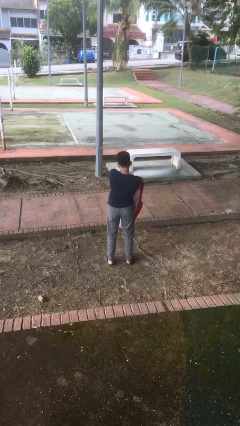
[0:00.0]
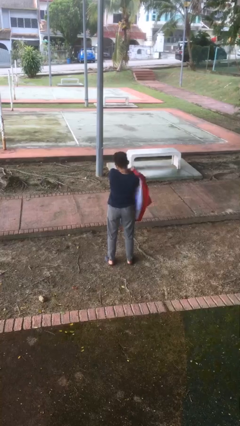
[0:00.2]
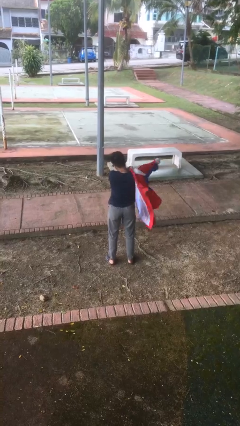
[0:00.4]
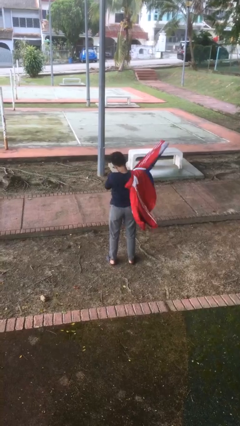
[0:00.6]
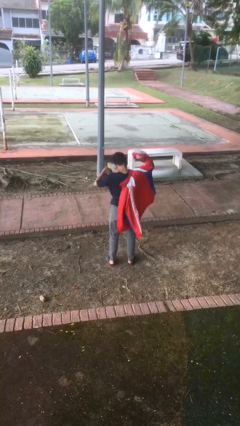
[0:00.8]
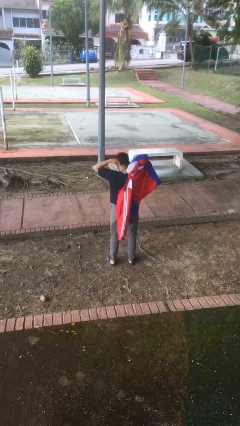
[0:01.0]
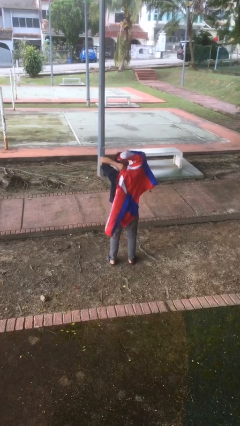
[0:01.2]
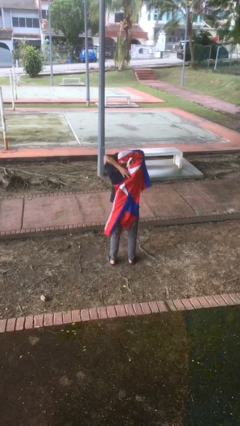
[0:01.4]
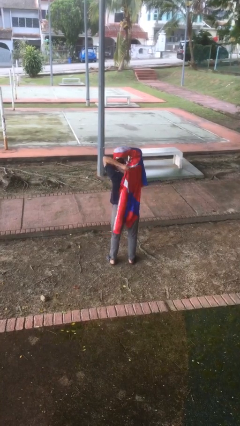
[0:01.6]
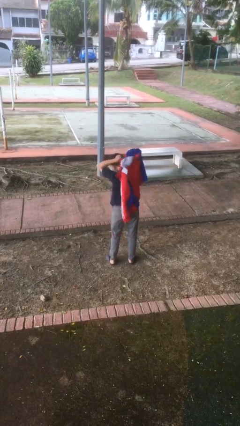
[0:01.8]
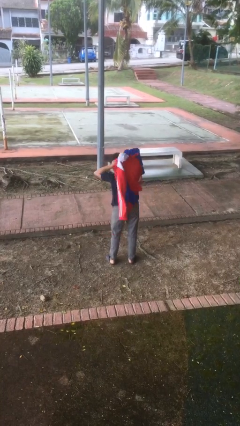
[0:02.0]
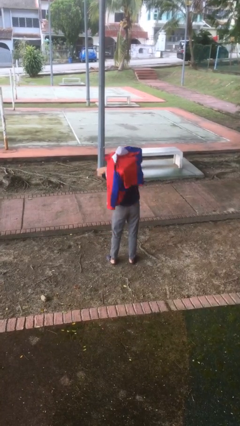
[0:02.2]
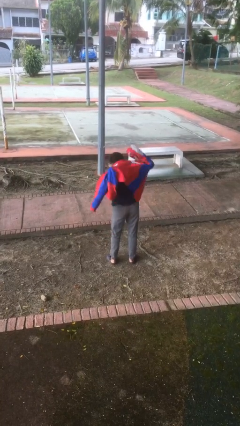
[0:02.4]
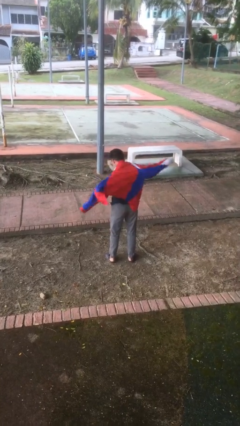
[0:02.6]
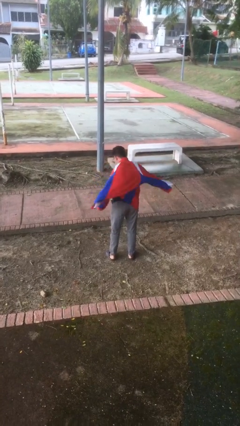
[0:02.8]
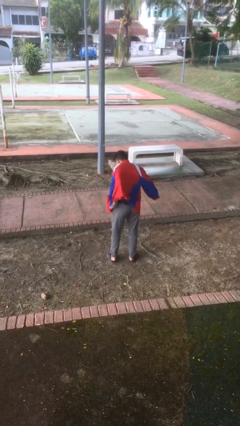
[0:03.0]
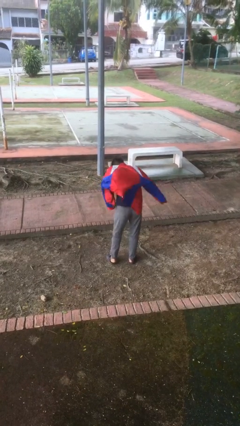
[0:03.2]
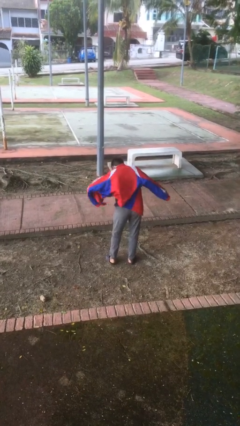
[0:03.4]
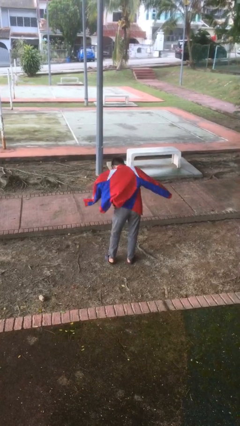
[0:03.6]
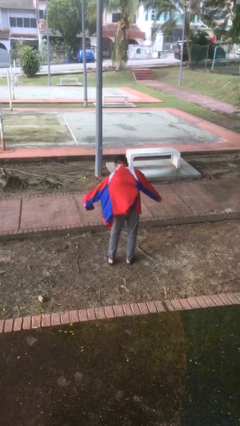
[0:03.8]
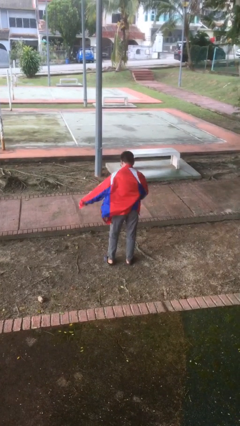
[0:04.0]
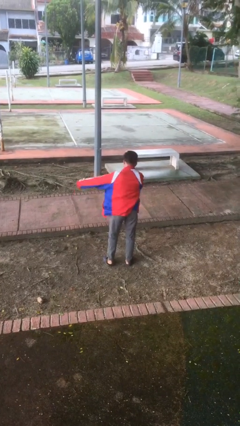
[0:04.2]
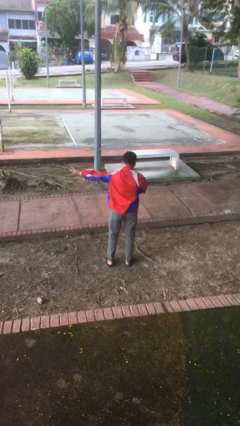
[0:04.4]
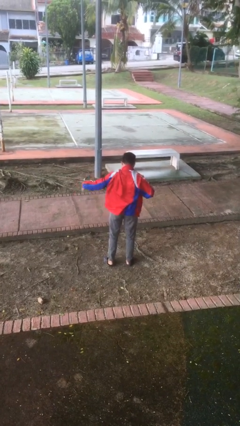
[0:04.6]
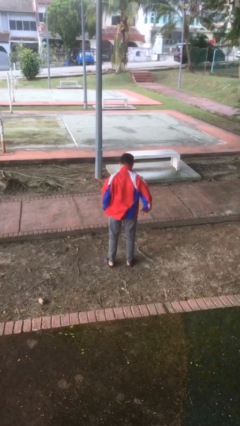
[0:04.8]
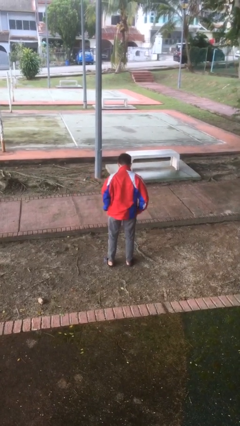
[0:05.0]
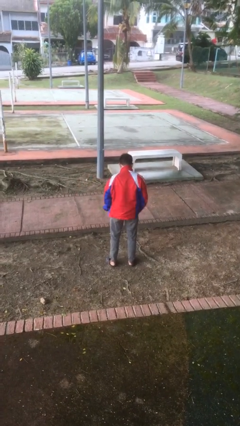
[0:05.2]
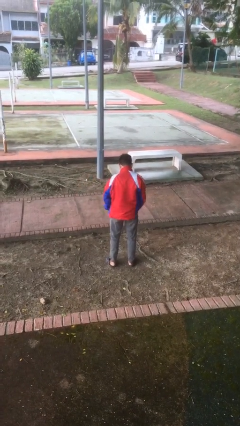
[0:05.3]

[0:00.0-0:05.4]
person puts on jacket

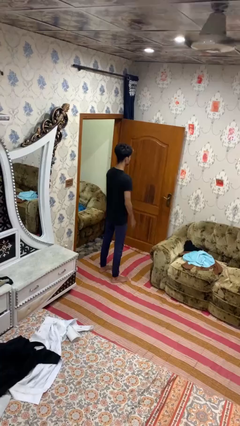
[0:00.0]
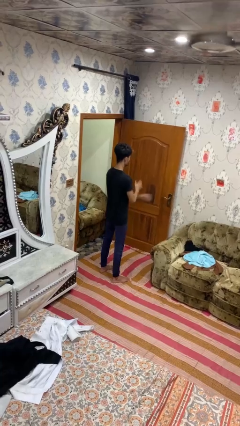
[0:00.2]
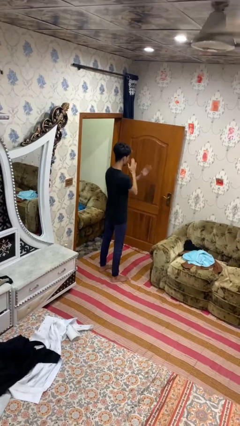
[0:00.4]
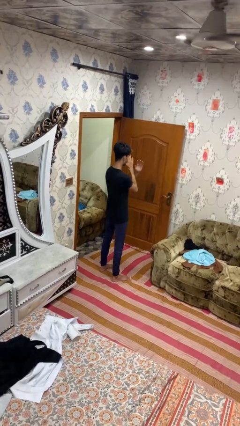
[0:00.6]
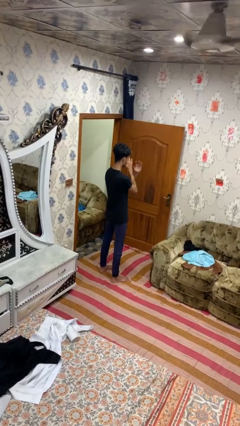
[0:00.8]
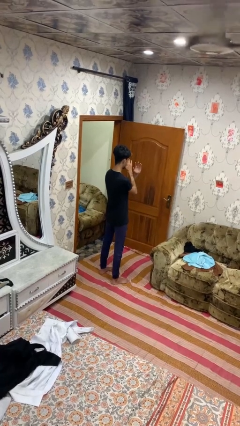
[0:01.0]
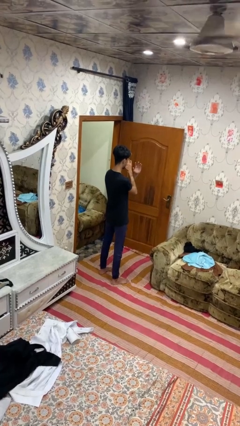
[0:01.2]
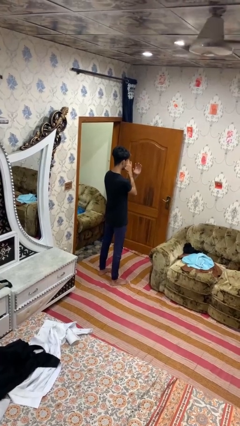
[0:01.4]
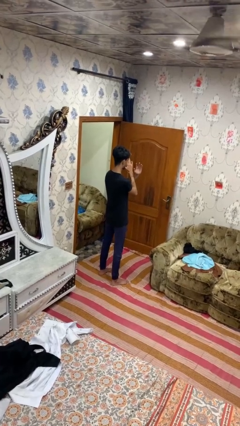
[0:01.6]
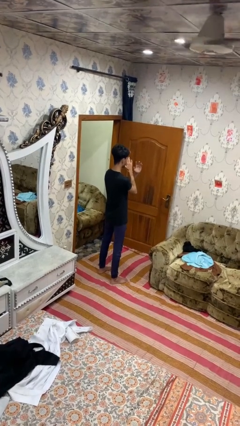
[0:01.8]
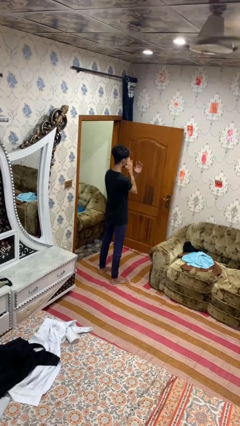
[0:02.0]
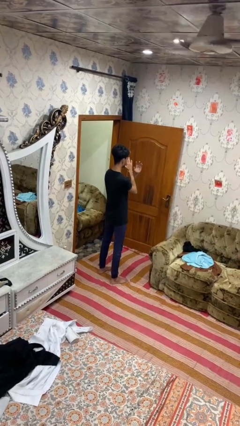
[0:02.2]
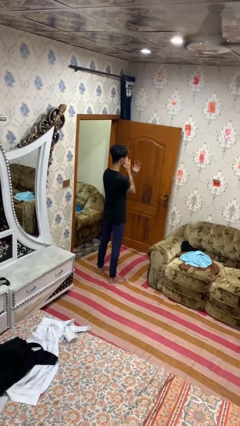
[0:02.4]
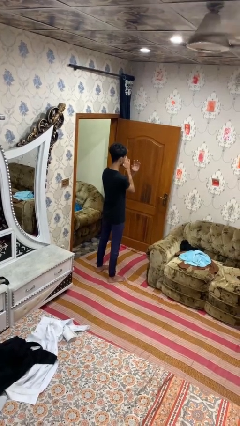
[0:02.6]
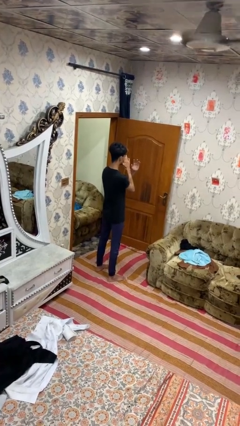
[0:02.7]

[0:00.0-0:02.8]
person gestures arms x

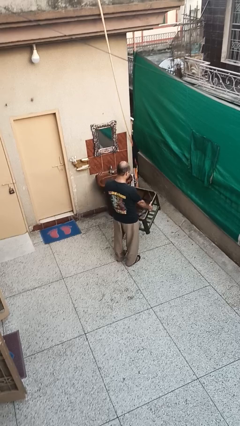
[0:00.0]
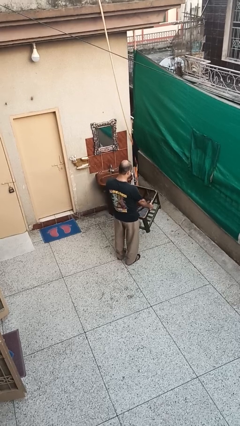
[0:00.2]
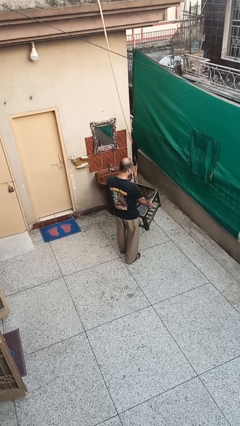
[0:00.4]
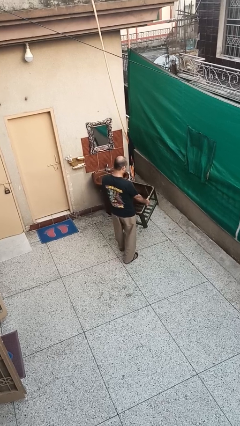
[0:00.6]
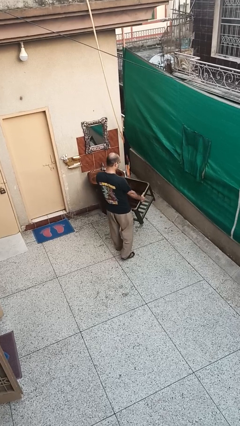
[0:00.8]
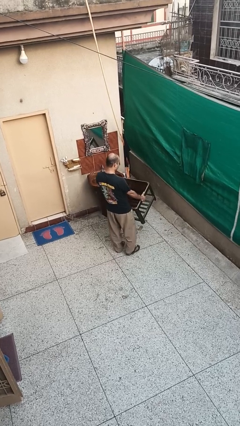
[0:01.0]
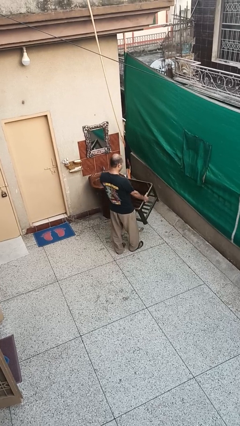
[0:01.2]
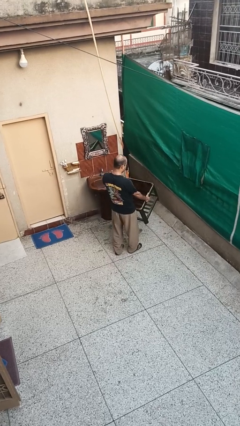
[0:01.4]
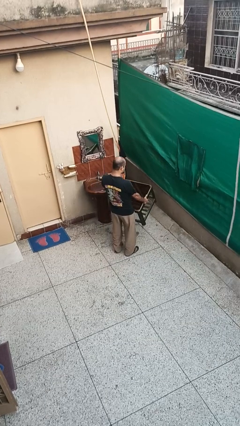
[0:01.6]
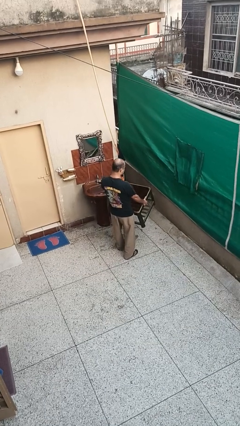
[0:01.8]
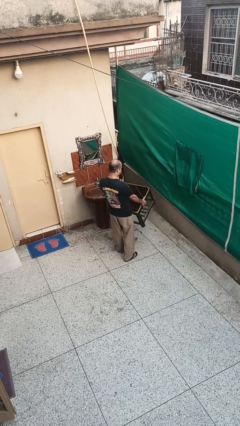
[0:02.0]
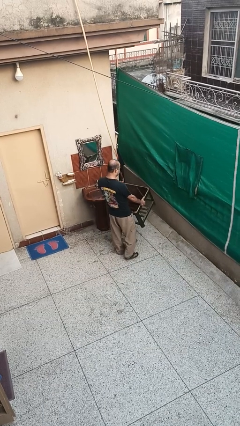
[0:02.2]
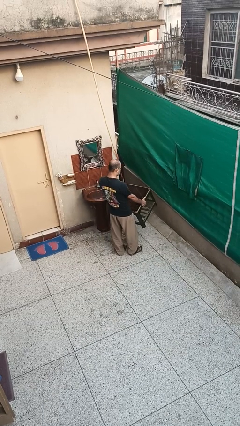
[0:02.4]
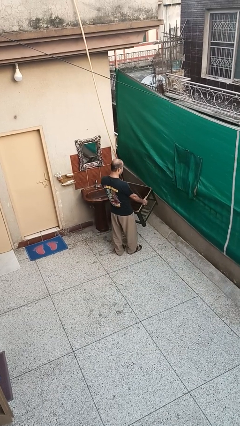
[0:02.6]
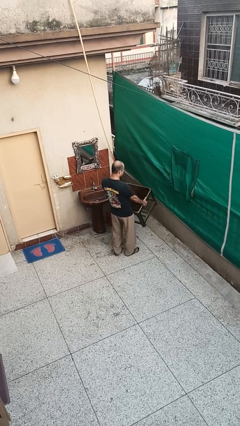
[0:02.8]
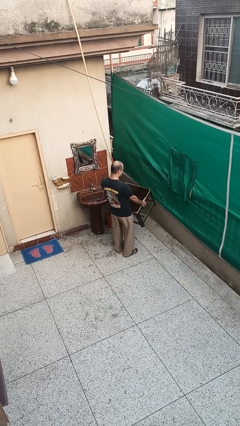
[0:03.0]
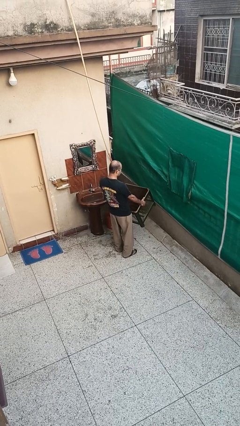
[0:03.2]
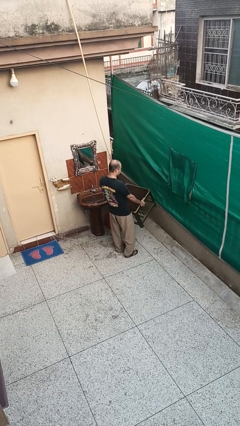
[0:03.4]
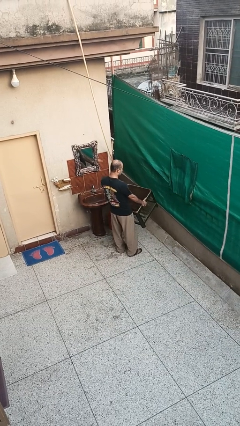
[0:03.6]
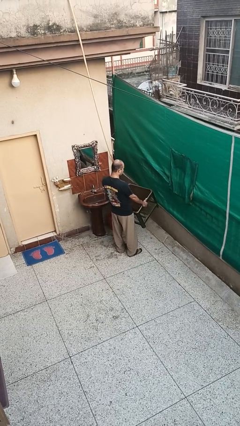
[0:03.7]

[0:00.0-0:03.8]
person carries furniture

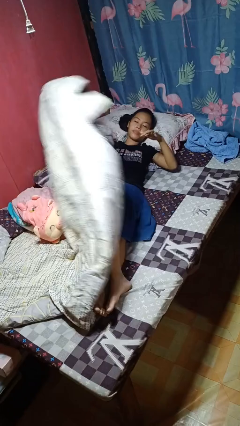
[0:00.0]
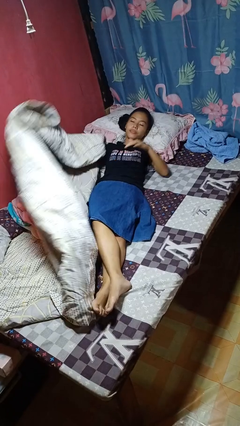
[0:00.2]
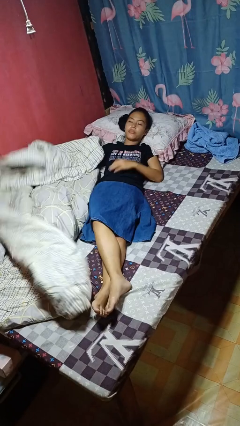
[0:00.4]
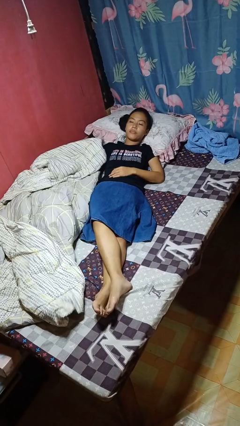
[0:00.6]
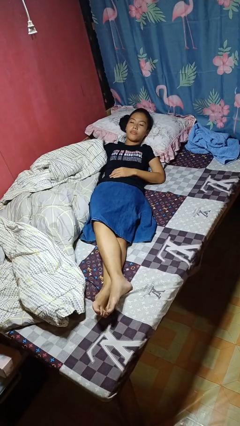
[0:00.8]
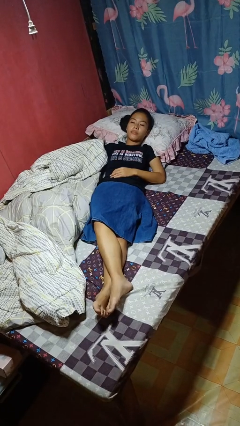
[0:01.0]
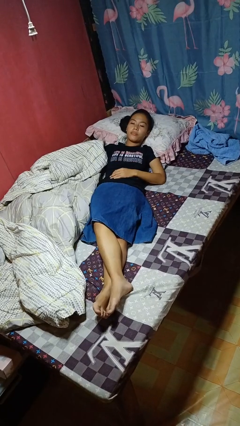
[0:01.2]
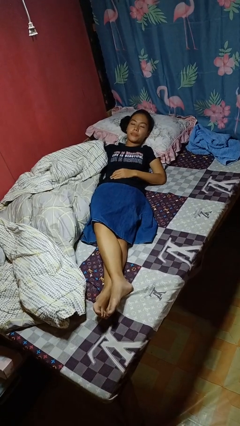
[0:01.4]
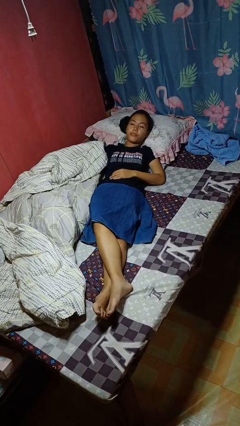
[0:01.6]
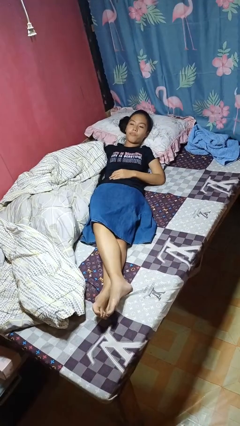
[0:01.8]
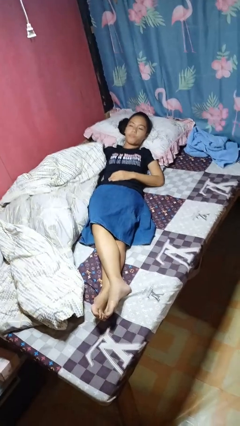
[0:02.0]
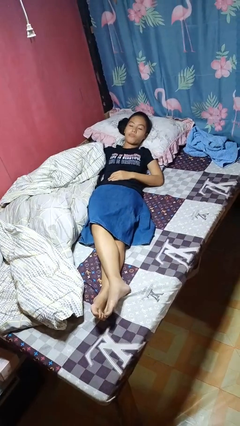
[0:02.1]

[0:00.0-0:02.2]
person uncovers with bedsheets

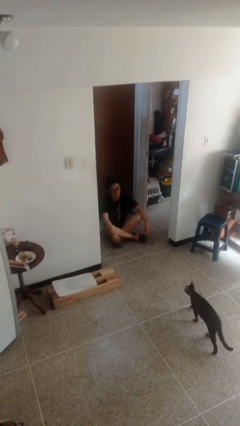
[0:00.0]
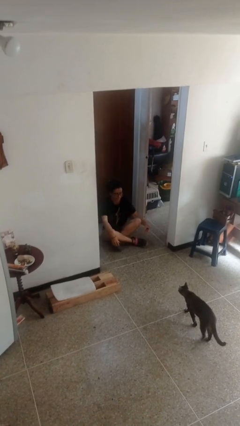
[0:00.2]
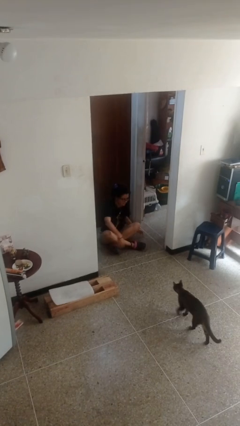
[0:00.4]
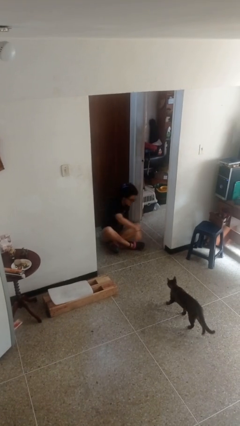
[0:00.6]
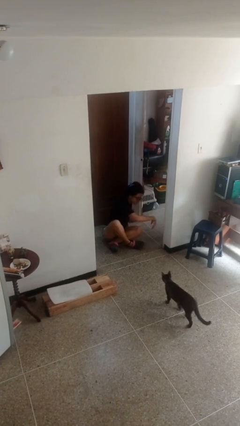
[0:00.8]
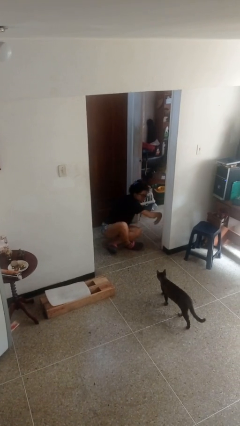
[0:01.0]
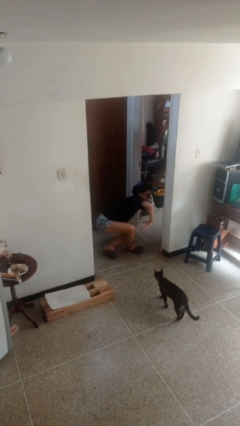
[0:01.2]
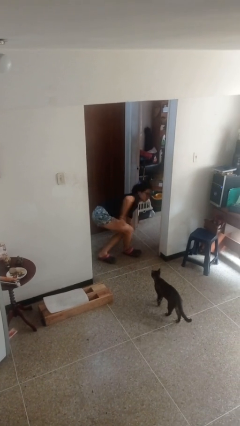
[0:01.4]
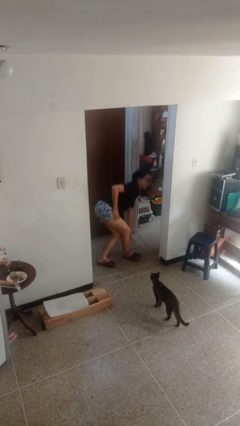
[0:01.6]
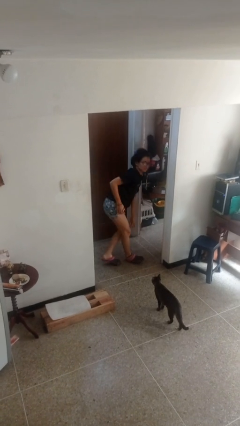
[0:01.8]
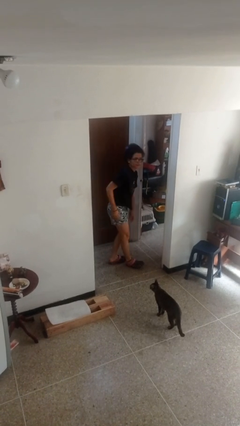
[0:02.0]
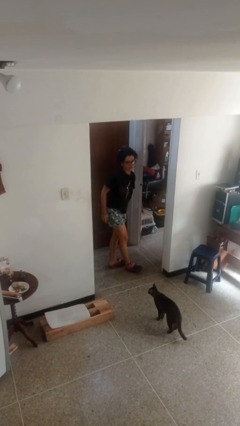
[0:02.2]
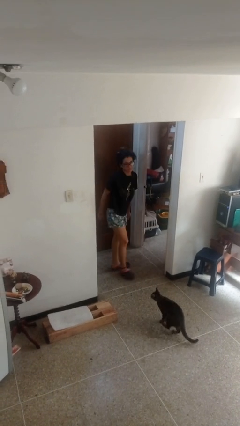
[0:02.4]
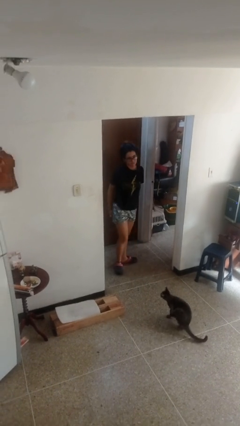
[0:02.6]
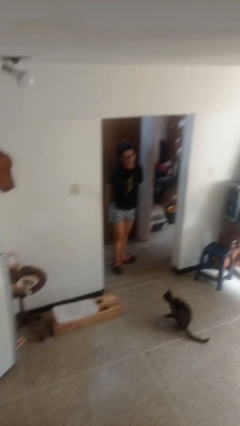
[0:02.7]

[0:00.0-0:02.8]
person stands up from floor

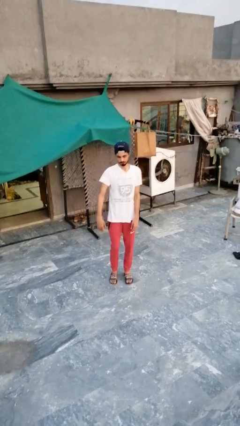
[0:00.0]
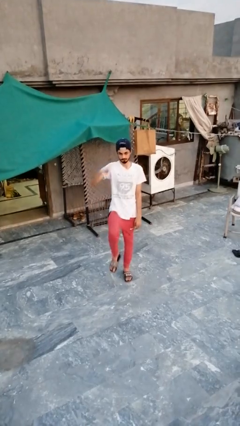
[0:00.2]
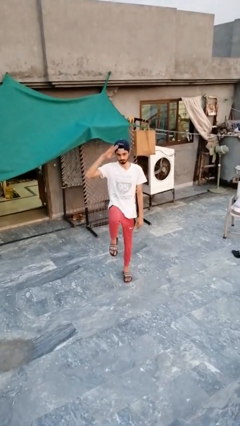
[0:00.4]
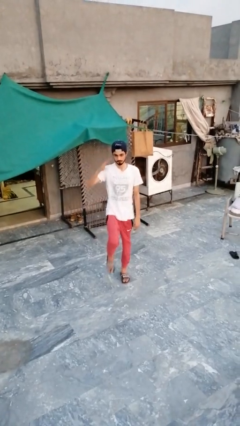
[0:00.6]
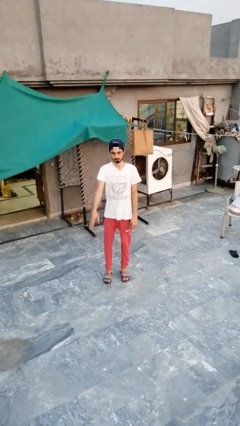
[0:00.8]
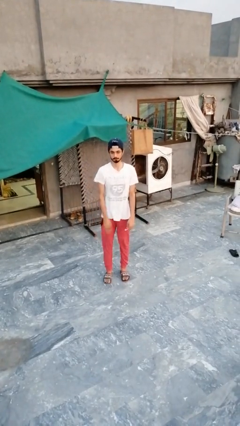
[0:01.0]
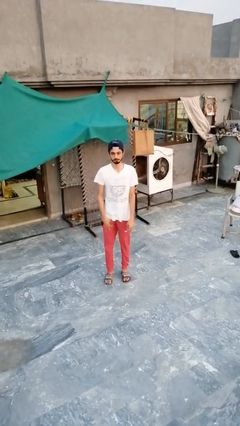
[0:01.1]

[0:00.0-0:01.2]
person salutes
